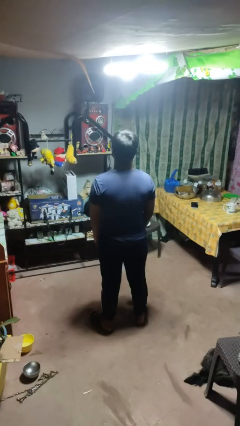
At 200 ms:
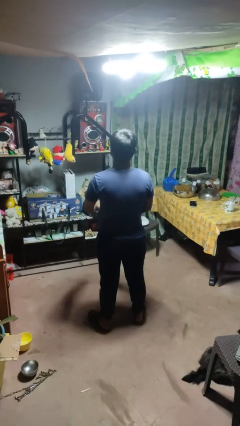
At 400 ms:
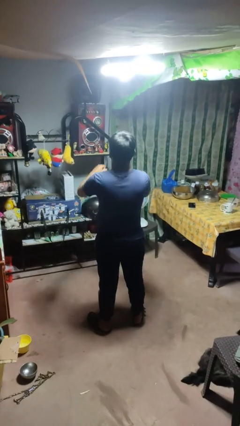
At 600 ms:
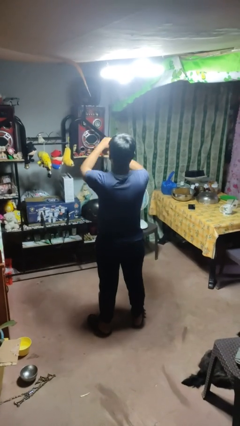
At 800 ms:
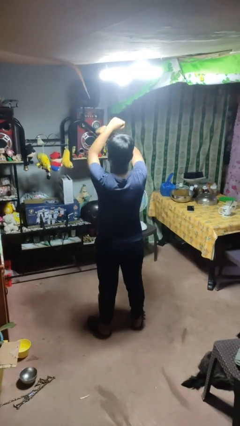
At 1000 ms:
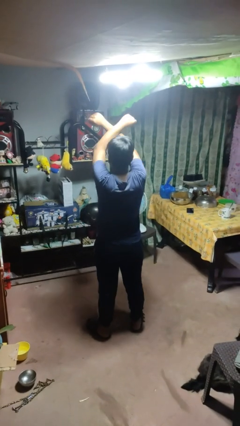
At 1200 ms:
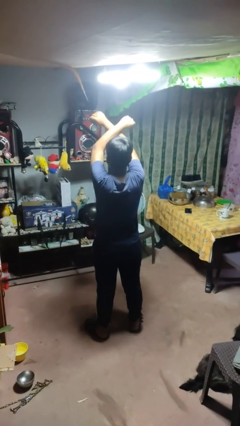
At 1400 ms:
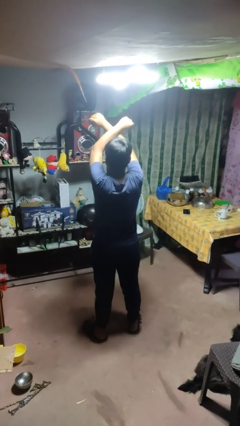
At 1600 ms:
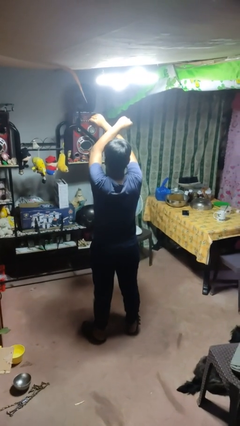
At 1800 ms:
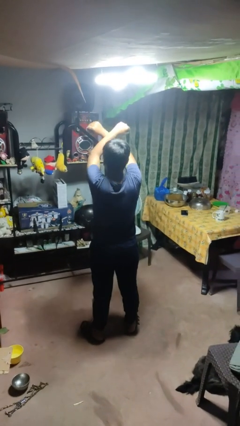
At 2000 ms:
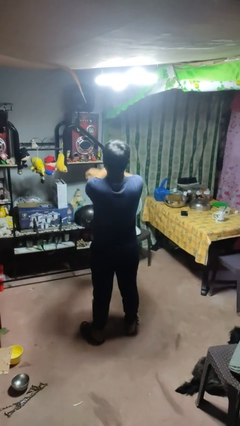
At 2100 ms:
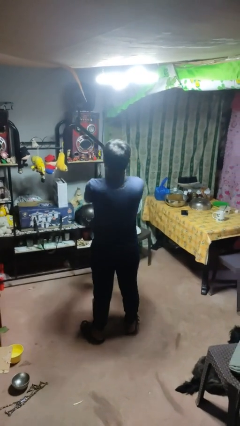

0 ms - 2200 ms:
person gestures arms x

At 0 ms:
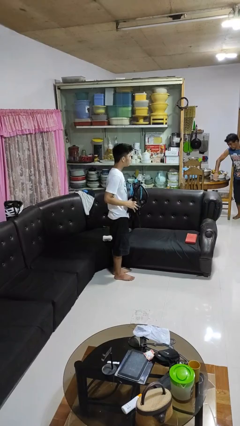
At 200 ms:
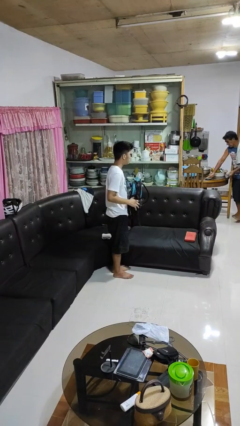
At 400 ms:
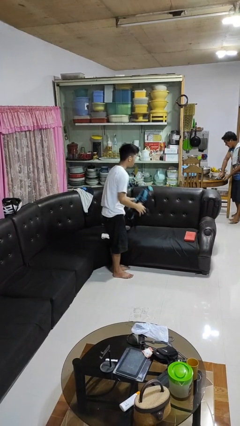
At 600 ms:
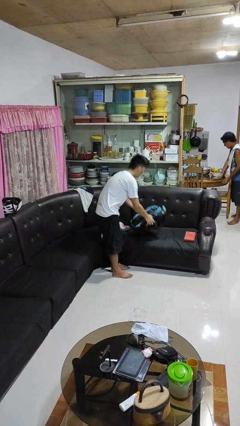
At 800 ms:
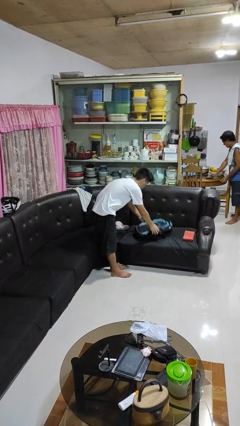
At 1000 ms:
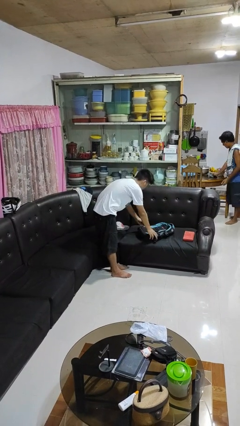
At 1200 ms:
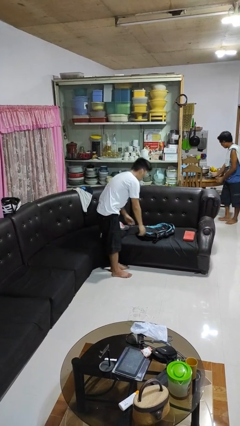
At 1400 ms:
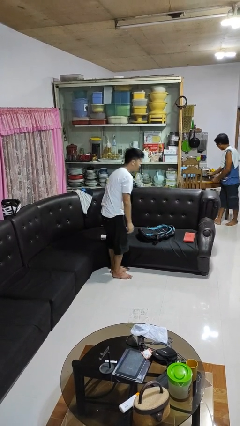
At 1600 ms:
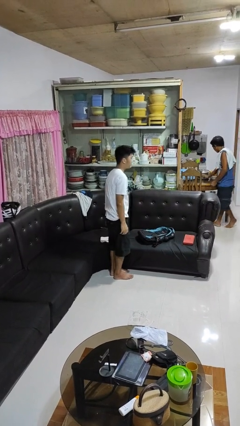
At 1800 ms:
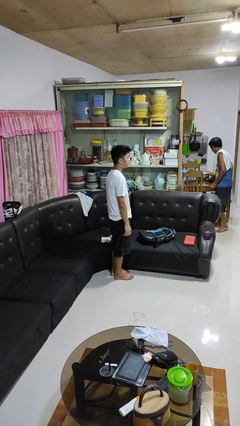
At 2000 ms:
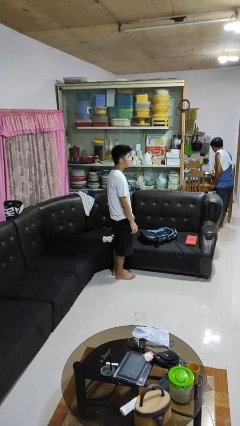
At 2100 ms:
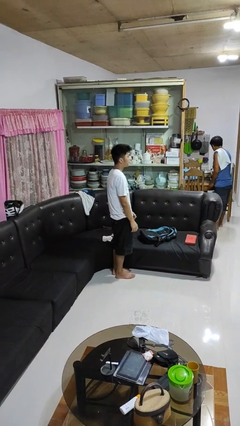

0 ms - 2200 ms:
person picks up object from couch

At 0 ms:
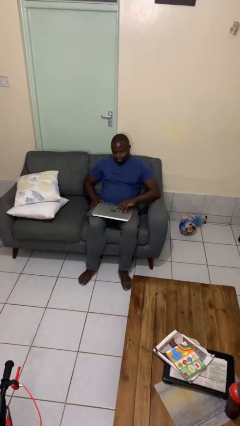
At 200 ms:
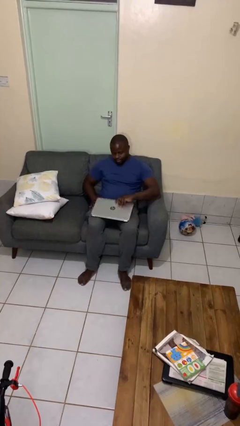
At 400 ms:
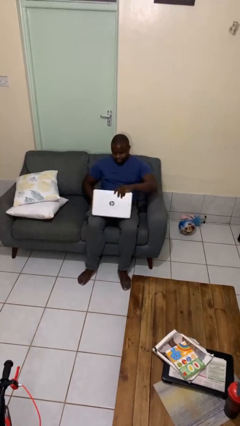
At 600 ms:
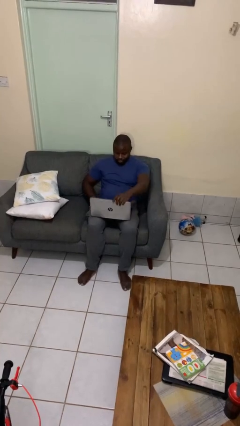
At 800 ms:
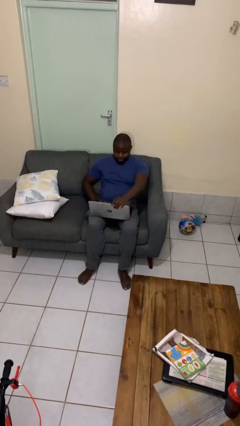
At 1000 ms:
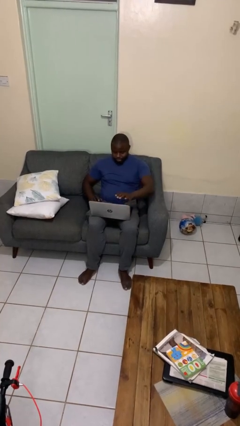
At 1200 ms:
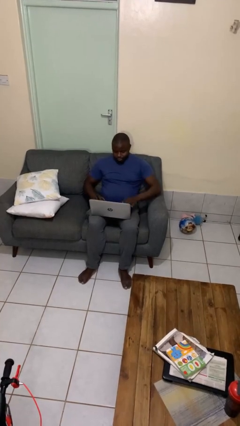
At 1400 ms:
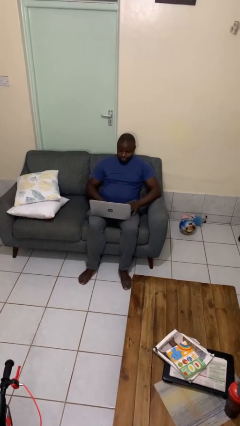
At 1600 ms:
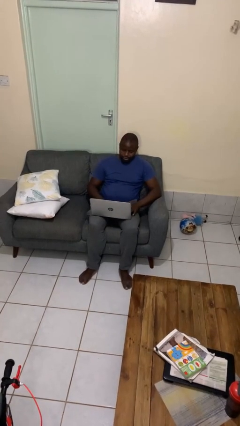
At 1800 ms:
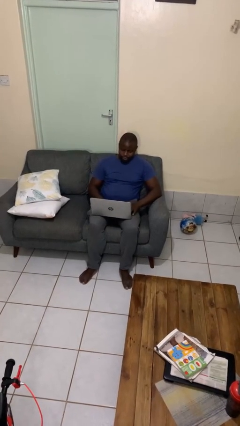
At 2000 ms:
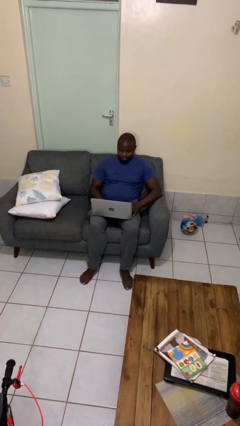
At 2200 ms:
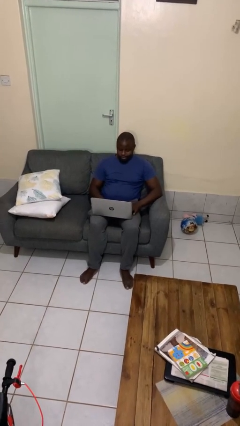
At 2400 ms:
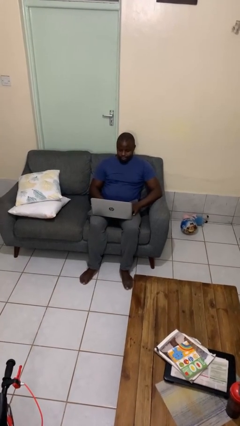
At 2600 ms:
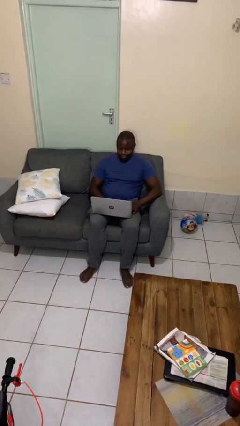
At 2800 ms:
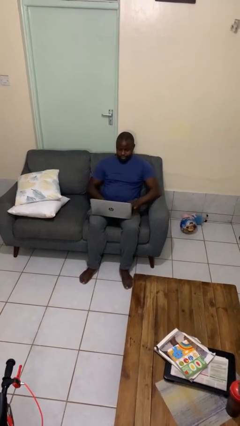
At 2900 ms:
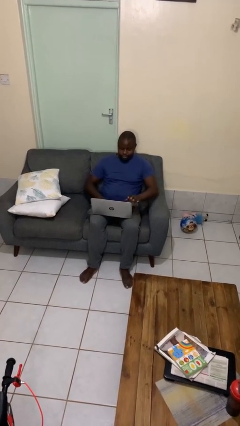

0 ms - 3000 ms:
person opens laptop

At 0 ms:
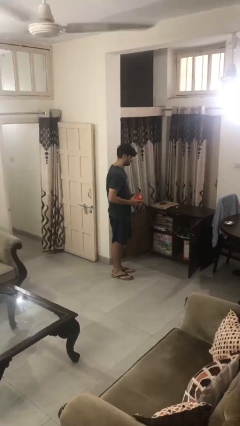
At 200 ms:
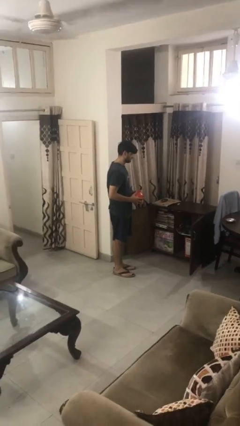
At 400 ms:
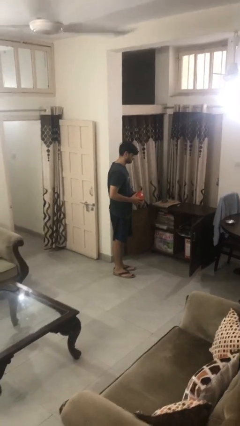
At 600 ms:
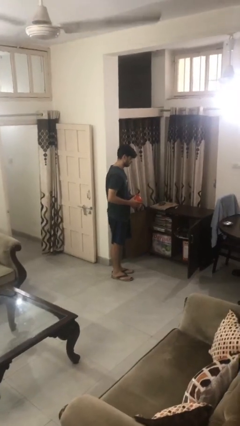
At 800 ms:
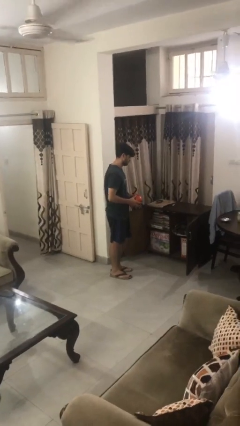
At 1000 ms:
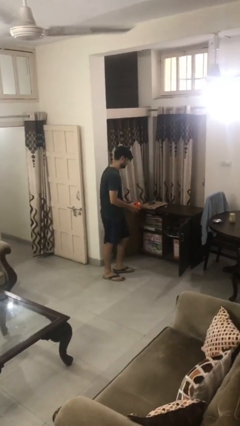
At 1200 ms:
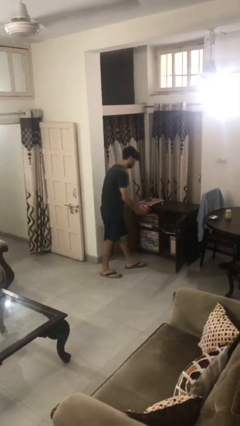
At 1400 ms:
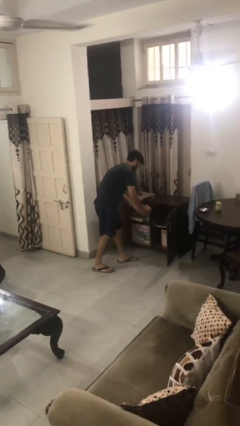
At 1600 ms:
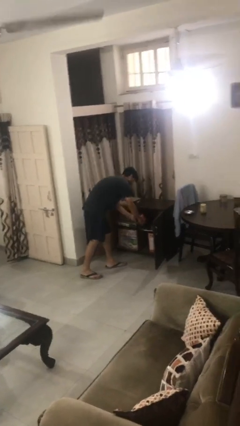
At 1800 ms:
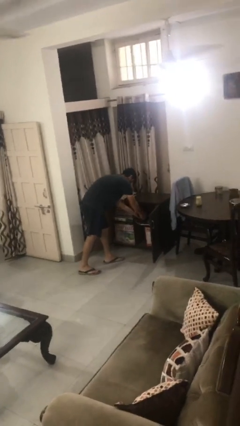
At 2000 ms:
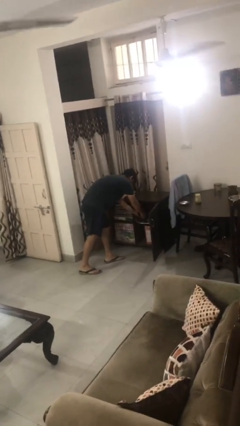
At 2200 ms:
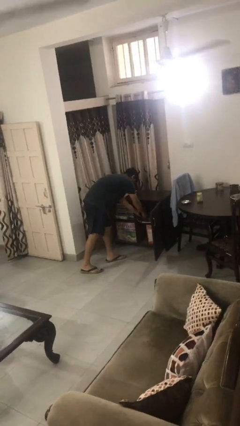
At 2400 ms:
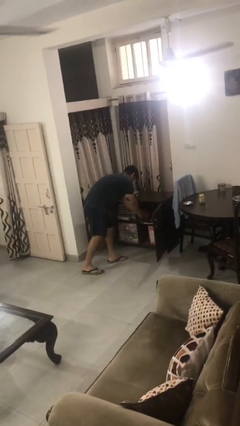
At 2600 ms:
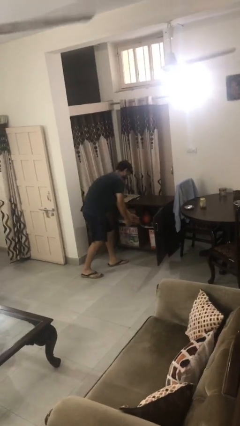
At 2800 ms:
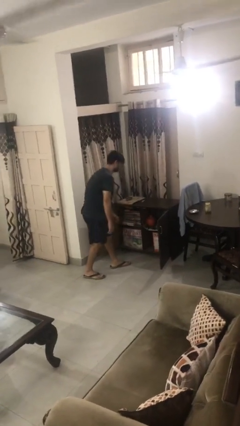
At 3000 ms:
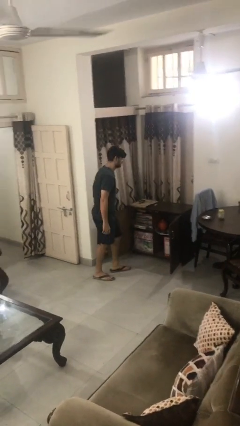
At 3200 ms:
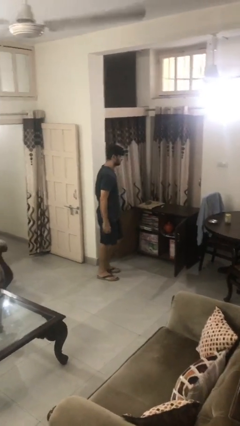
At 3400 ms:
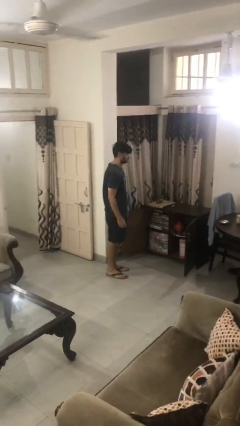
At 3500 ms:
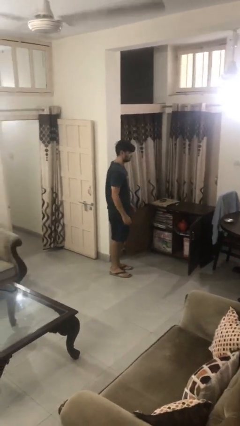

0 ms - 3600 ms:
person puts down object into cabinet

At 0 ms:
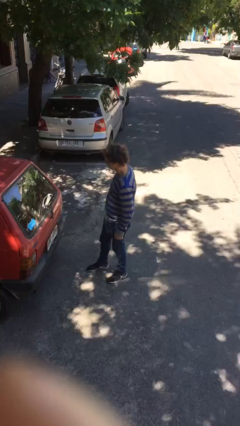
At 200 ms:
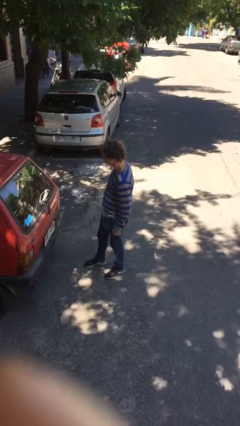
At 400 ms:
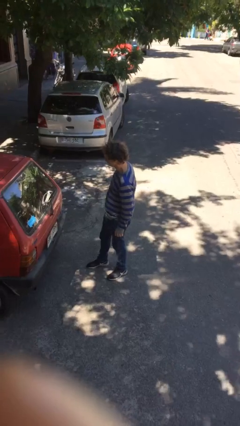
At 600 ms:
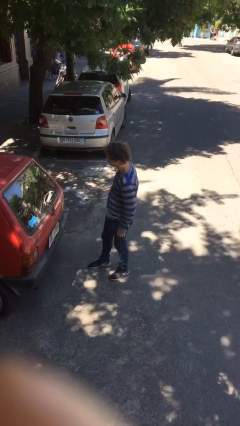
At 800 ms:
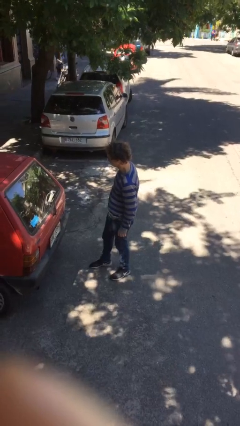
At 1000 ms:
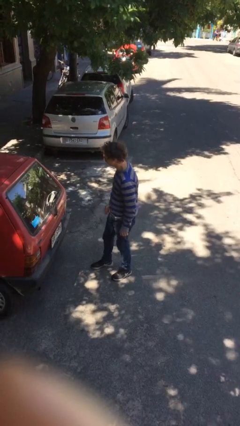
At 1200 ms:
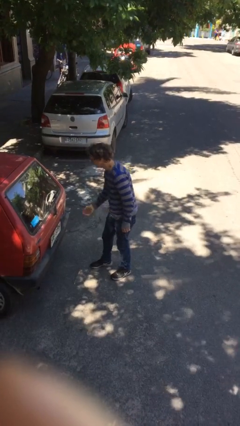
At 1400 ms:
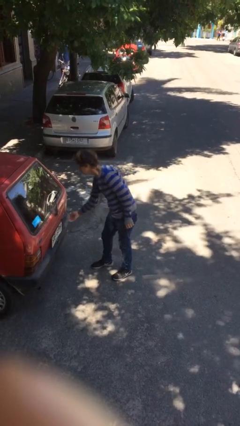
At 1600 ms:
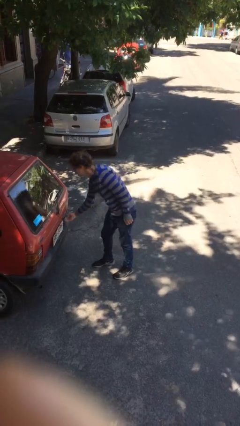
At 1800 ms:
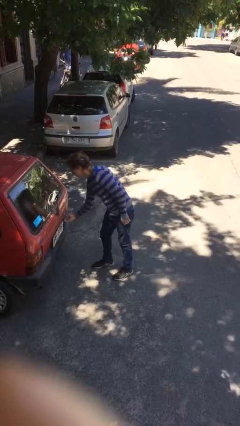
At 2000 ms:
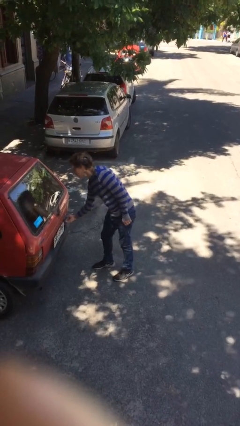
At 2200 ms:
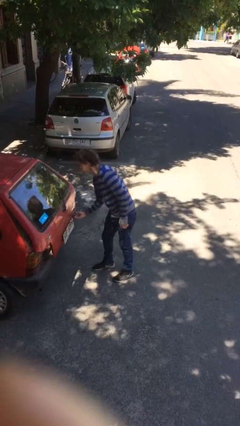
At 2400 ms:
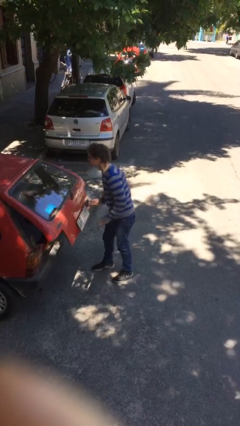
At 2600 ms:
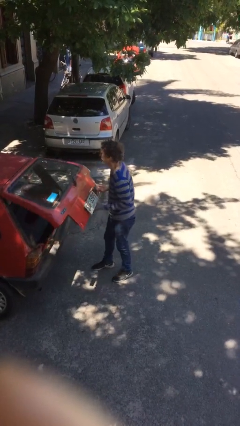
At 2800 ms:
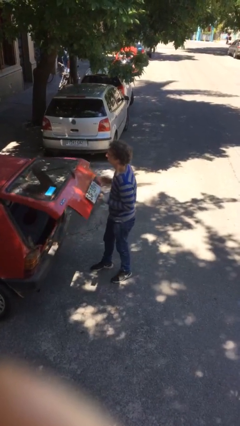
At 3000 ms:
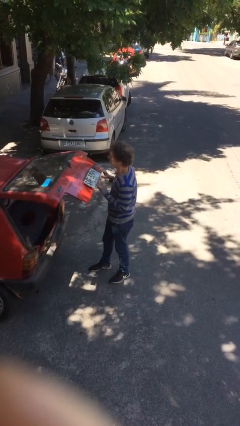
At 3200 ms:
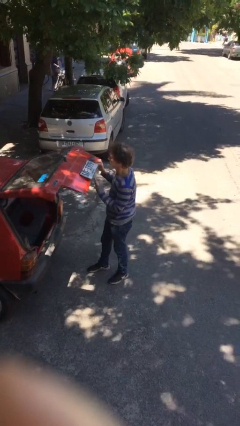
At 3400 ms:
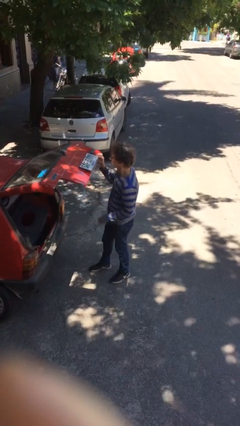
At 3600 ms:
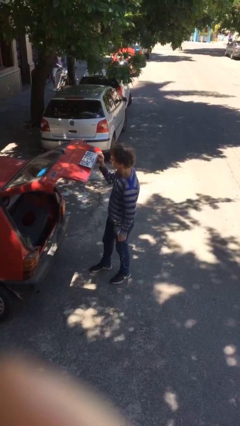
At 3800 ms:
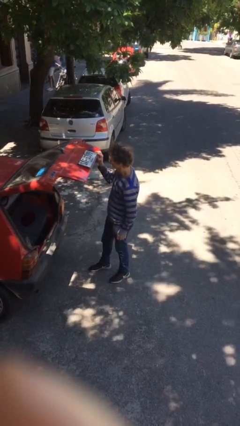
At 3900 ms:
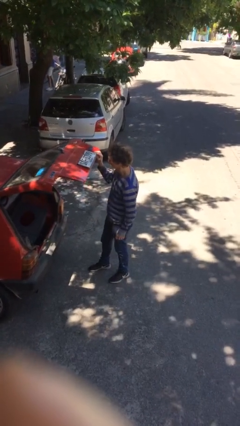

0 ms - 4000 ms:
person opens car trunk

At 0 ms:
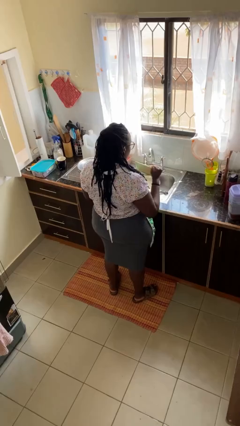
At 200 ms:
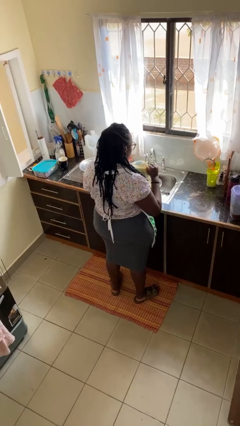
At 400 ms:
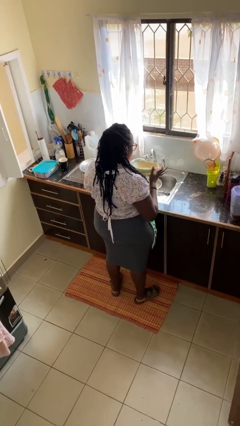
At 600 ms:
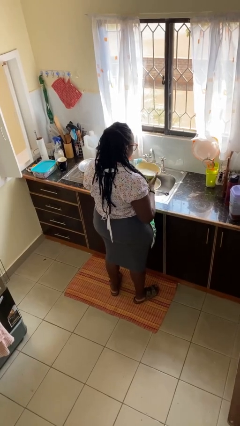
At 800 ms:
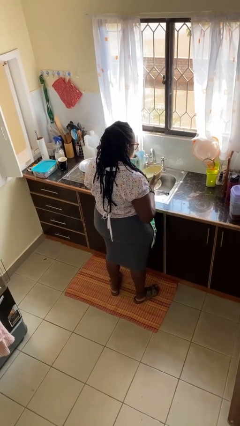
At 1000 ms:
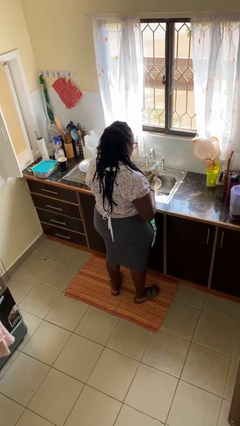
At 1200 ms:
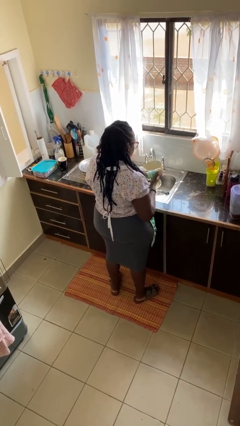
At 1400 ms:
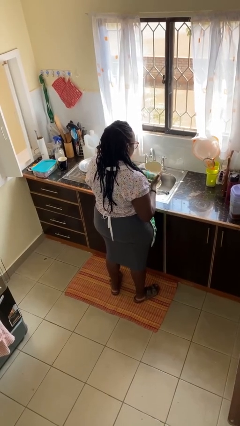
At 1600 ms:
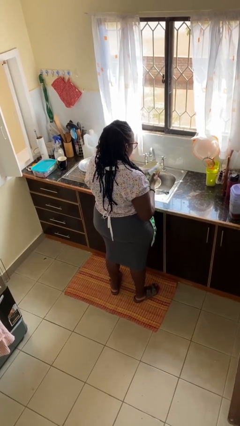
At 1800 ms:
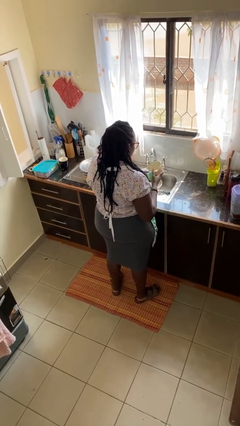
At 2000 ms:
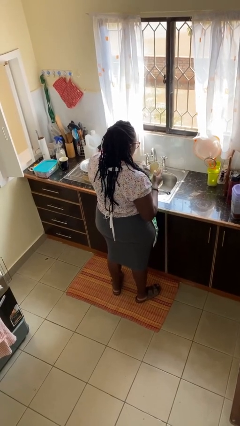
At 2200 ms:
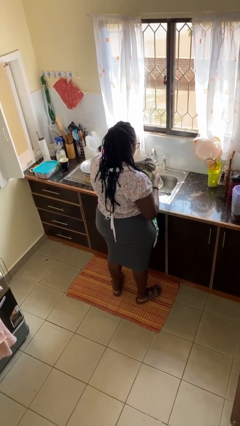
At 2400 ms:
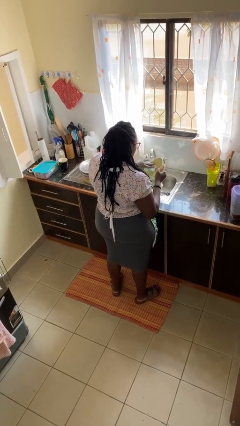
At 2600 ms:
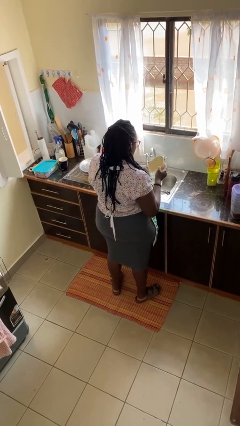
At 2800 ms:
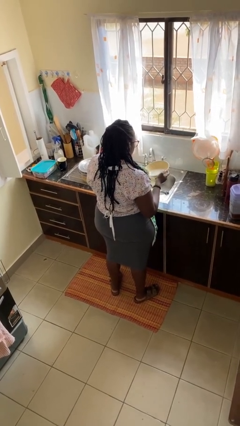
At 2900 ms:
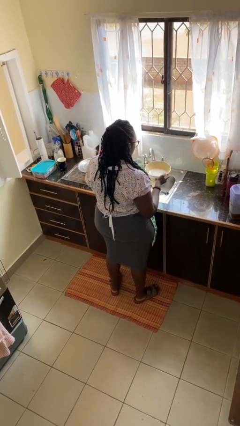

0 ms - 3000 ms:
person dries dish
